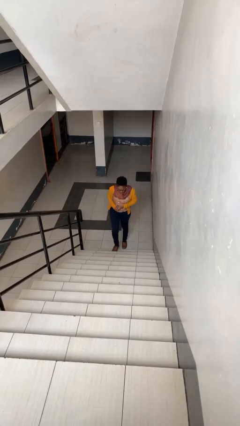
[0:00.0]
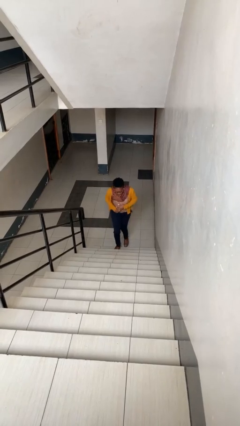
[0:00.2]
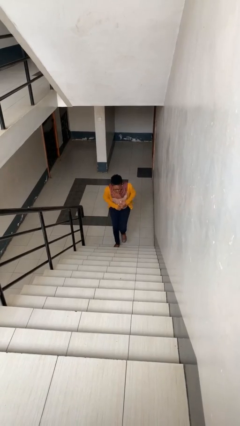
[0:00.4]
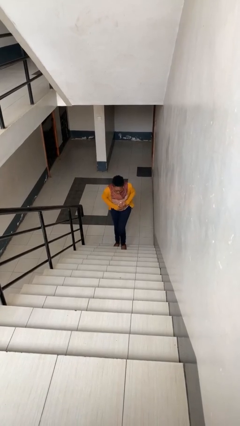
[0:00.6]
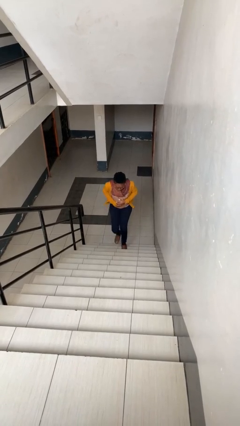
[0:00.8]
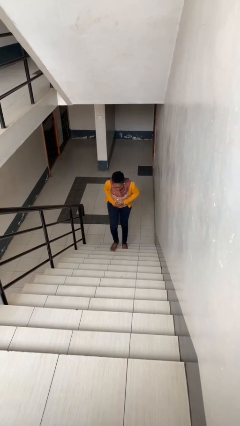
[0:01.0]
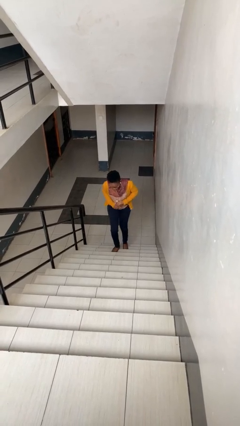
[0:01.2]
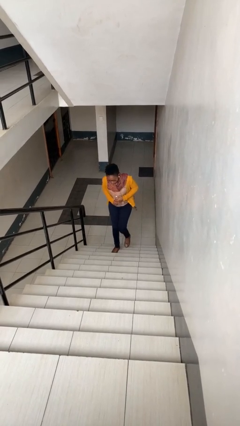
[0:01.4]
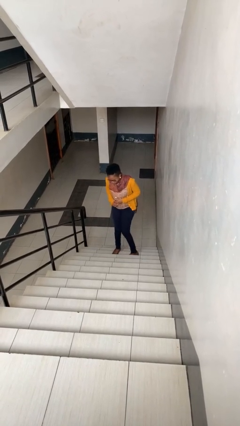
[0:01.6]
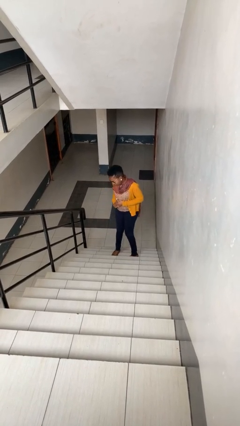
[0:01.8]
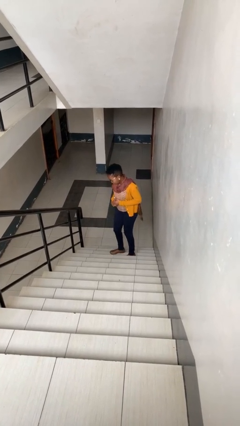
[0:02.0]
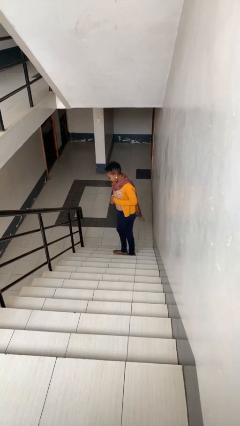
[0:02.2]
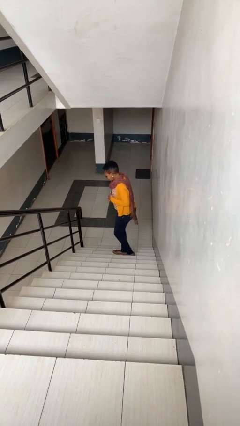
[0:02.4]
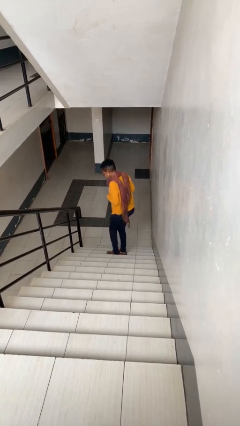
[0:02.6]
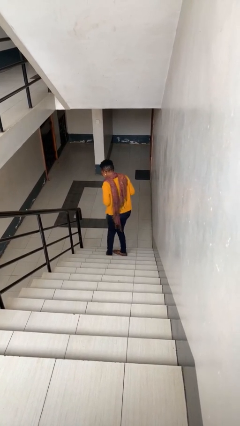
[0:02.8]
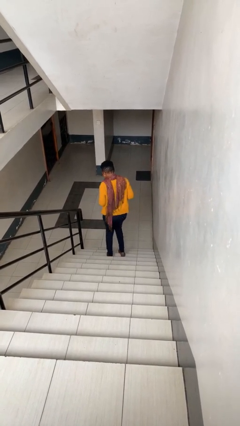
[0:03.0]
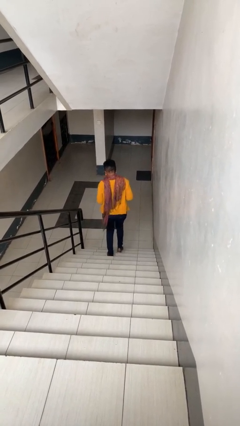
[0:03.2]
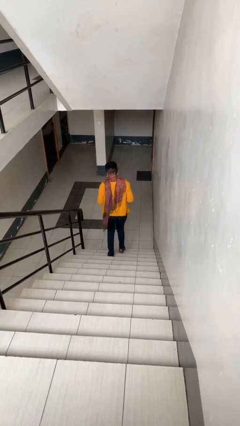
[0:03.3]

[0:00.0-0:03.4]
person climbs up stairs

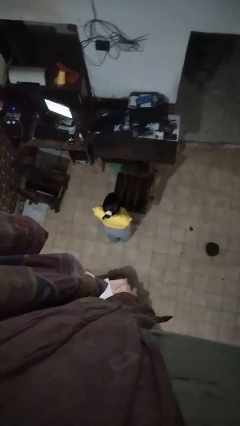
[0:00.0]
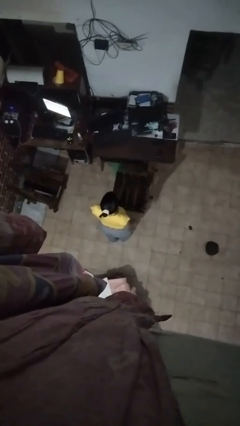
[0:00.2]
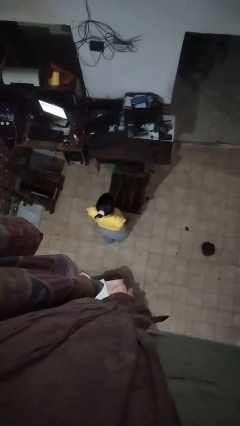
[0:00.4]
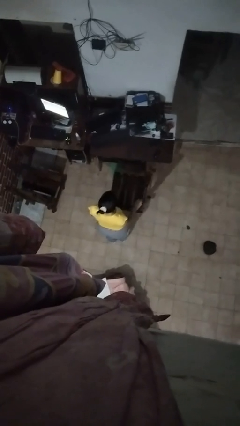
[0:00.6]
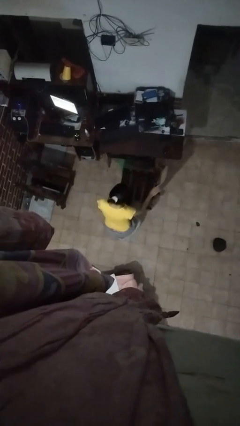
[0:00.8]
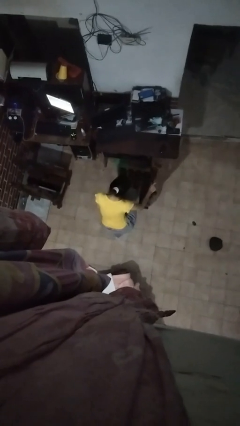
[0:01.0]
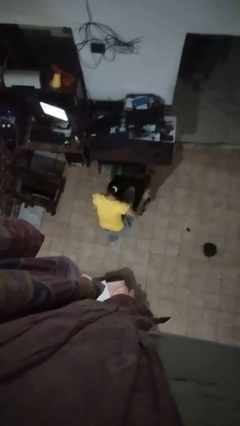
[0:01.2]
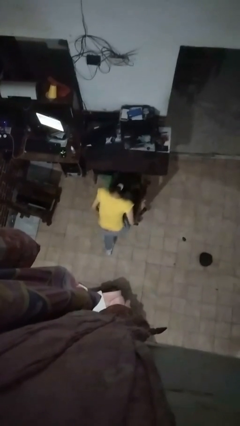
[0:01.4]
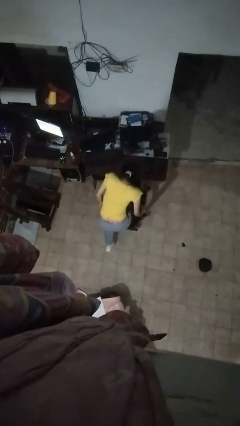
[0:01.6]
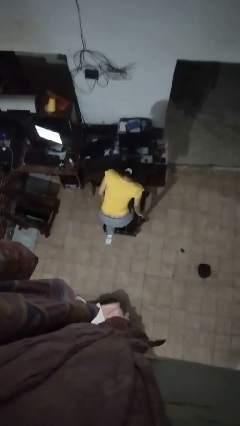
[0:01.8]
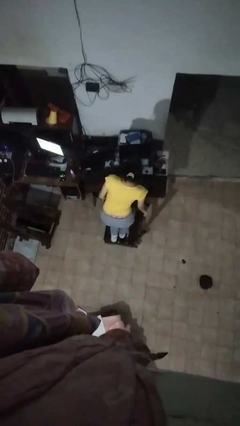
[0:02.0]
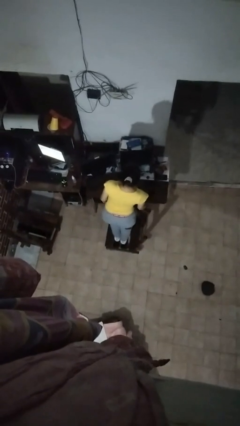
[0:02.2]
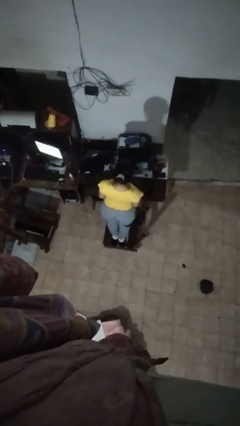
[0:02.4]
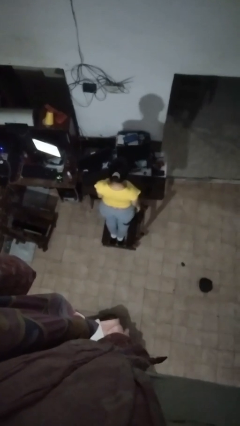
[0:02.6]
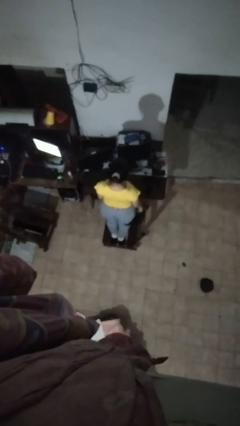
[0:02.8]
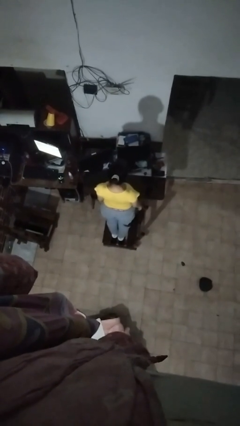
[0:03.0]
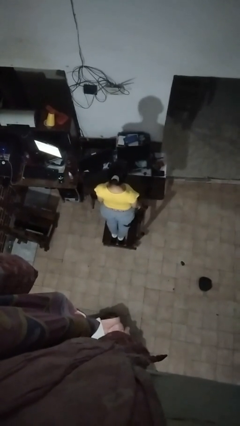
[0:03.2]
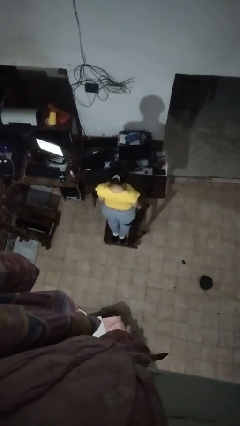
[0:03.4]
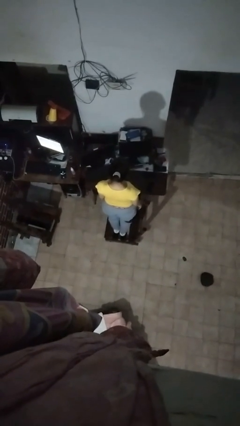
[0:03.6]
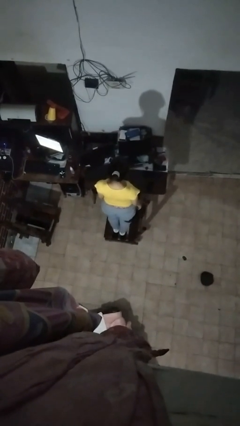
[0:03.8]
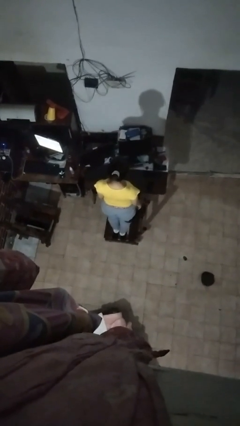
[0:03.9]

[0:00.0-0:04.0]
person climbs on chair

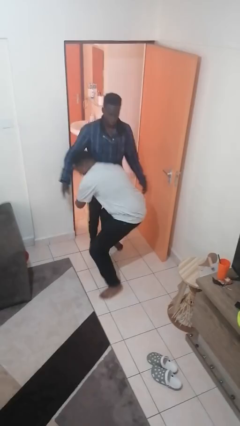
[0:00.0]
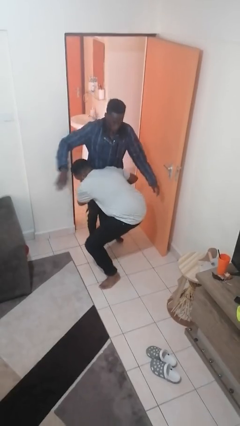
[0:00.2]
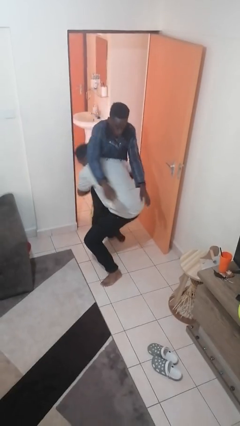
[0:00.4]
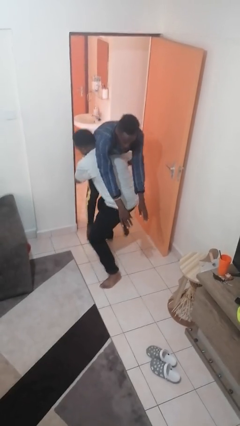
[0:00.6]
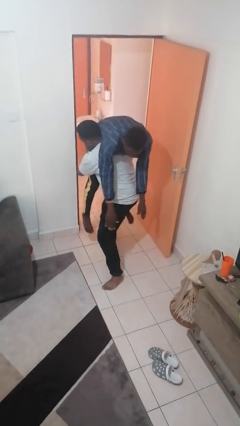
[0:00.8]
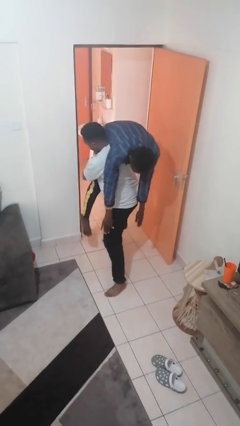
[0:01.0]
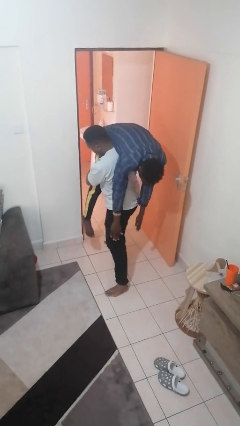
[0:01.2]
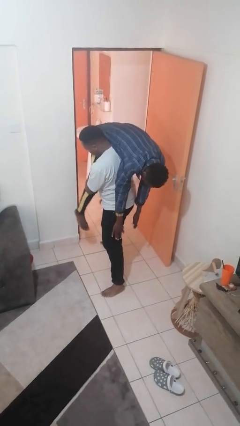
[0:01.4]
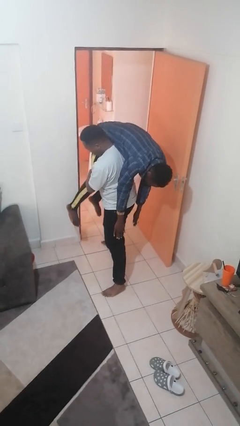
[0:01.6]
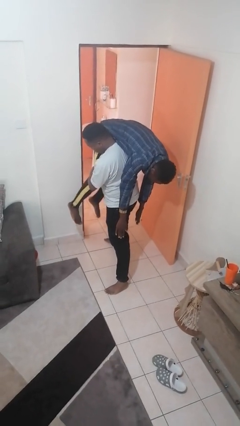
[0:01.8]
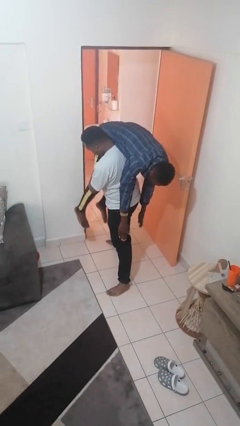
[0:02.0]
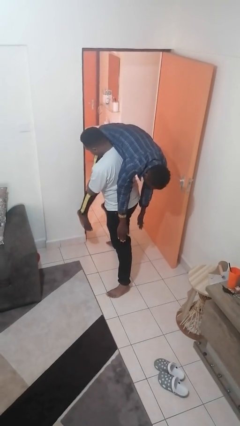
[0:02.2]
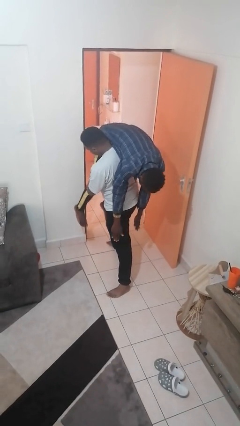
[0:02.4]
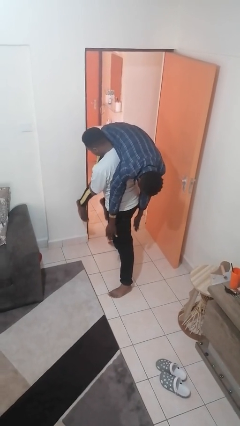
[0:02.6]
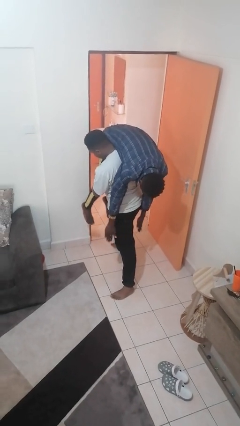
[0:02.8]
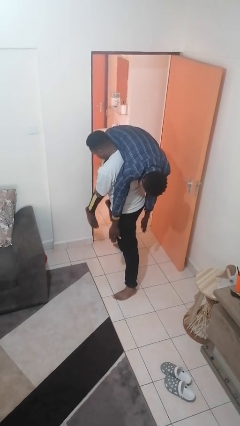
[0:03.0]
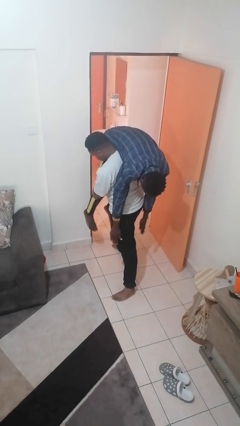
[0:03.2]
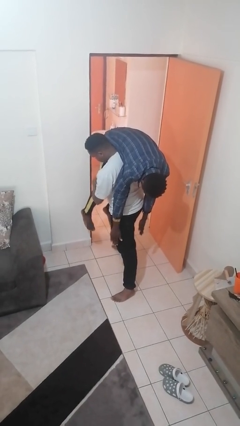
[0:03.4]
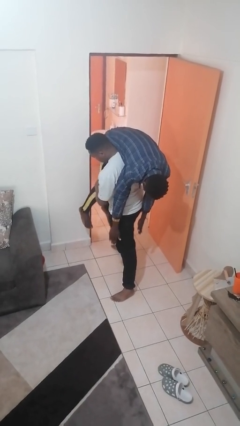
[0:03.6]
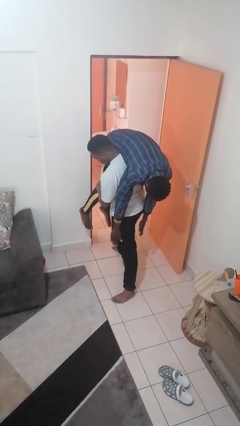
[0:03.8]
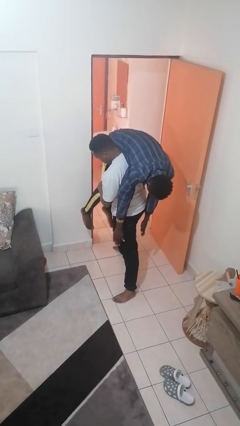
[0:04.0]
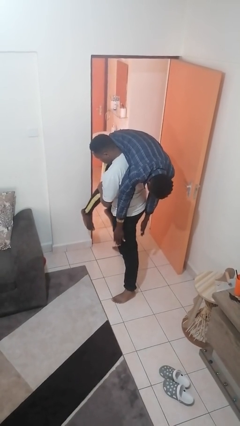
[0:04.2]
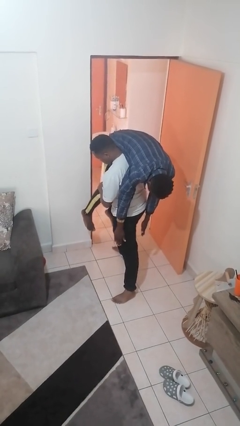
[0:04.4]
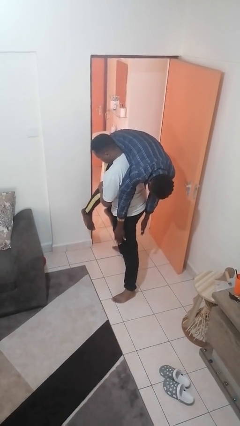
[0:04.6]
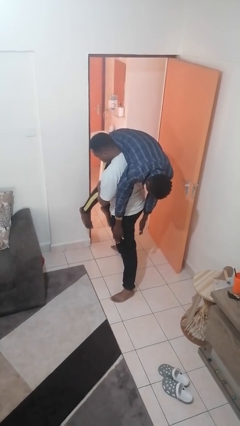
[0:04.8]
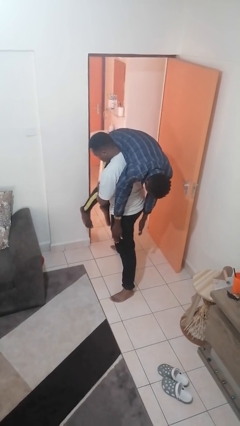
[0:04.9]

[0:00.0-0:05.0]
person carries person over shoulder

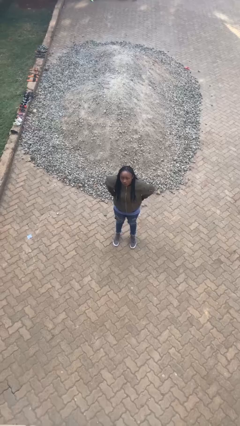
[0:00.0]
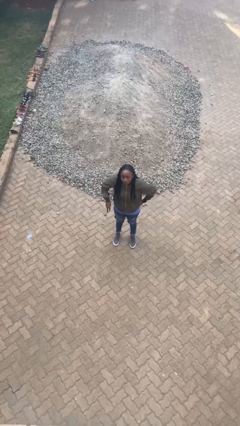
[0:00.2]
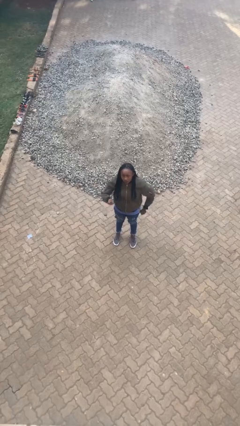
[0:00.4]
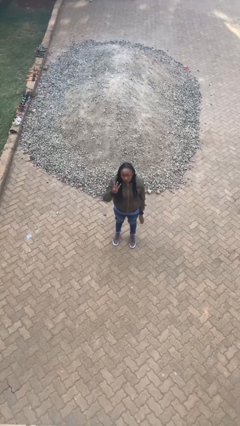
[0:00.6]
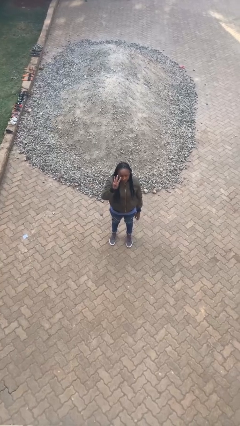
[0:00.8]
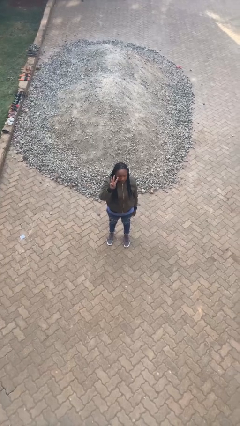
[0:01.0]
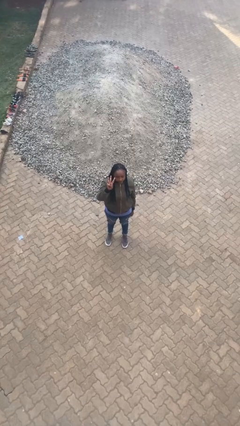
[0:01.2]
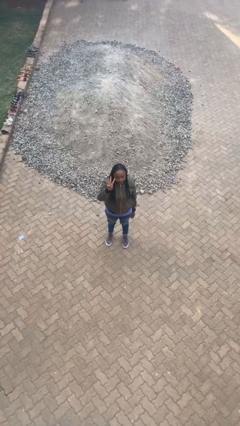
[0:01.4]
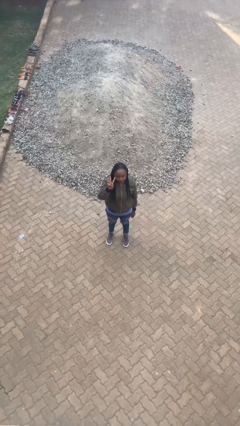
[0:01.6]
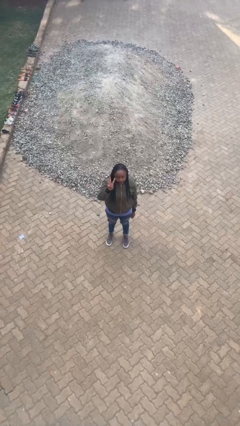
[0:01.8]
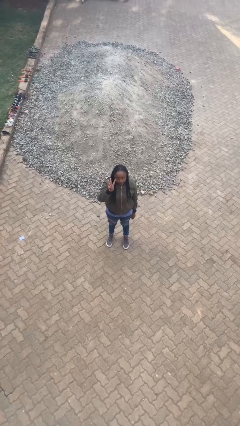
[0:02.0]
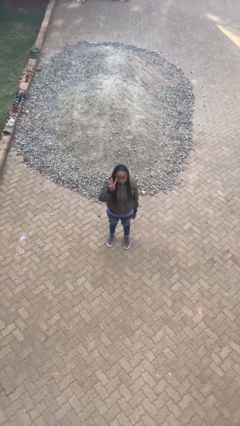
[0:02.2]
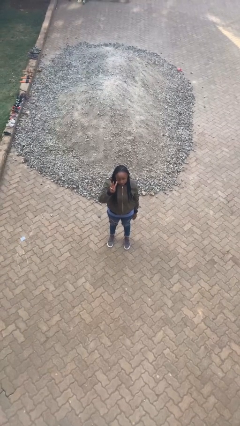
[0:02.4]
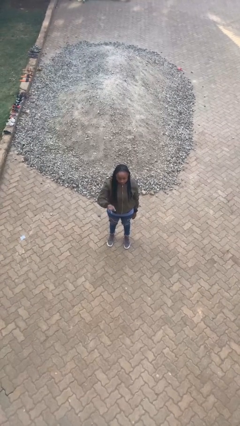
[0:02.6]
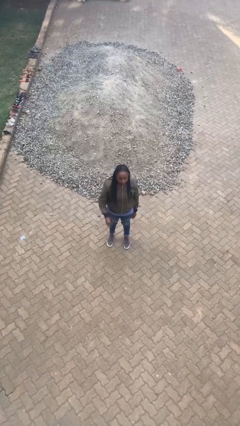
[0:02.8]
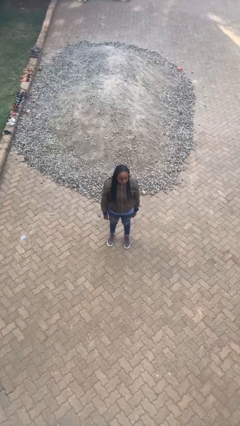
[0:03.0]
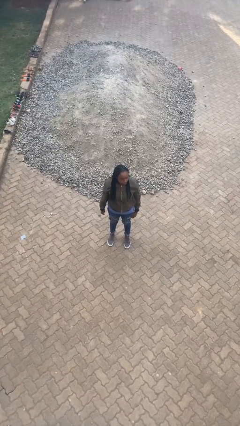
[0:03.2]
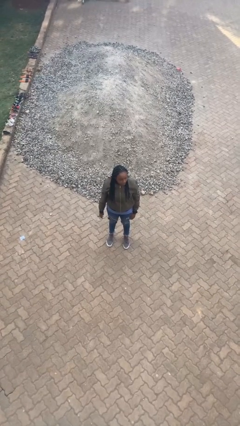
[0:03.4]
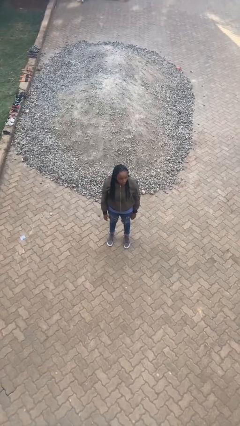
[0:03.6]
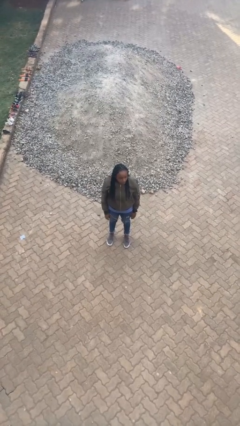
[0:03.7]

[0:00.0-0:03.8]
person gestures number three

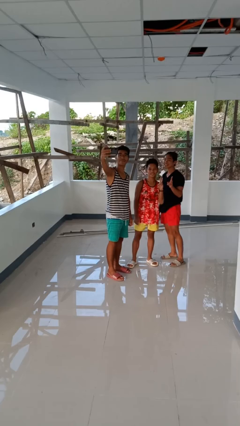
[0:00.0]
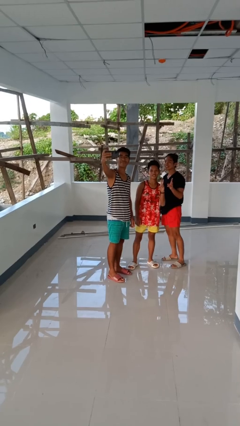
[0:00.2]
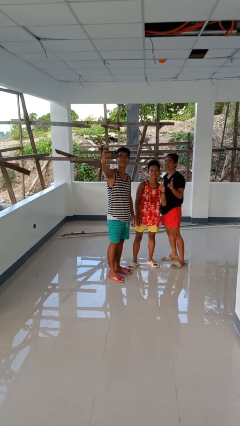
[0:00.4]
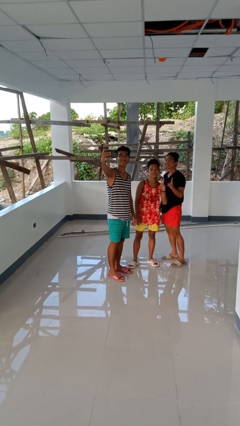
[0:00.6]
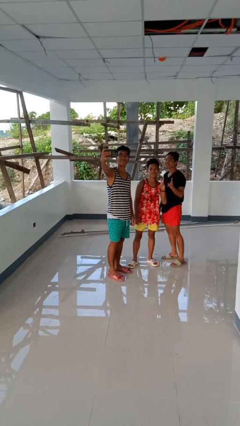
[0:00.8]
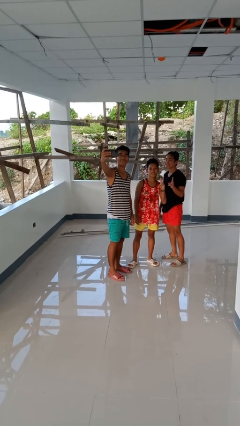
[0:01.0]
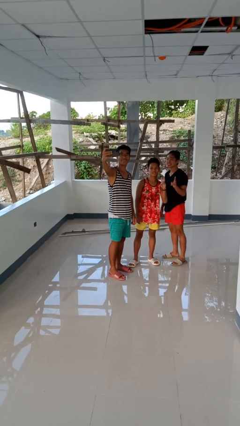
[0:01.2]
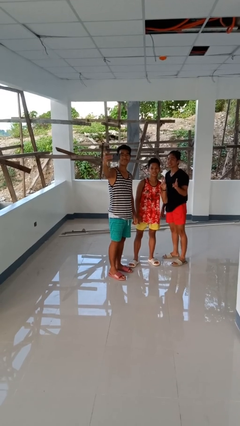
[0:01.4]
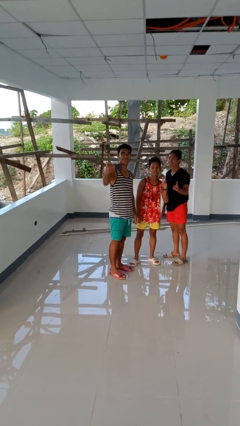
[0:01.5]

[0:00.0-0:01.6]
person takes selfie with person
